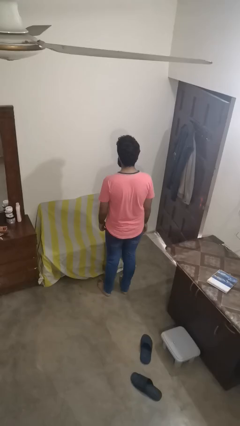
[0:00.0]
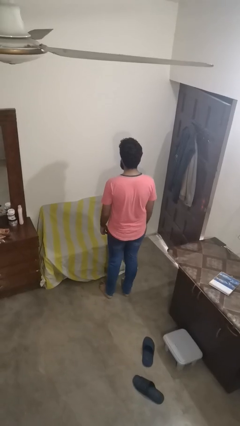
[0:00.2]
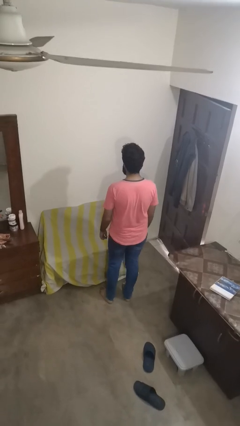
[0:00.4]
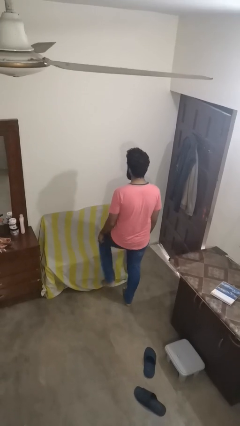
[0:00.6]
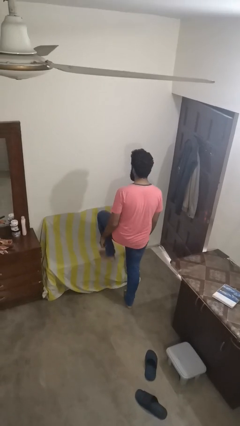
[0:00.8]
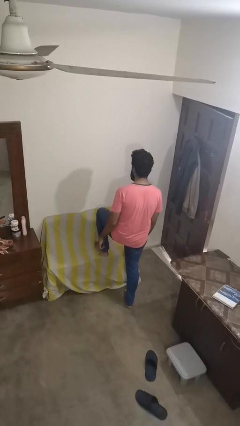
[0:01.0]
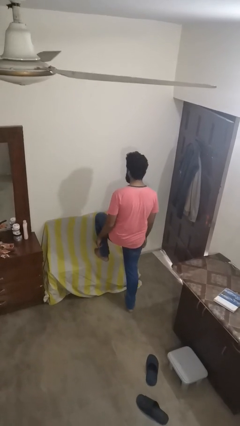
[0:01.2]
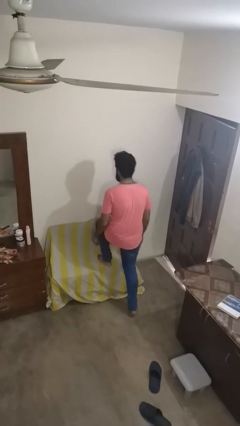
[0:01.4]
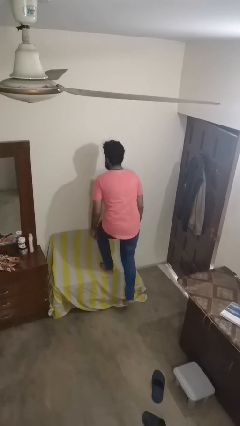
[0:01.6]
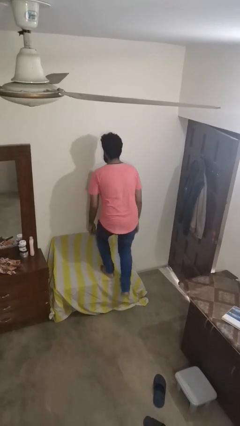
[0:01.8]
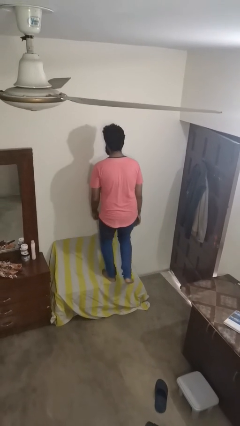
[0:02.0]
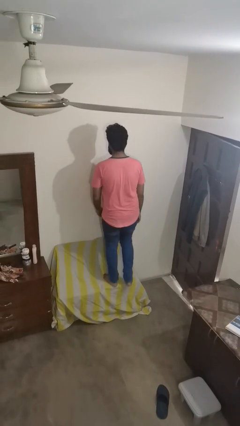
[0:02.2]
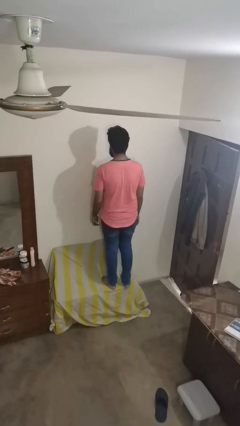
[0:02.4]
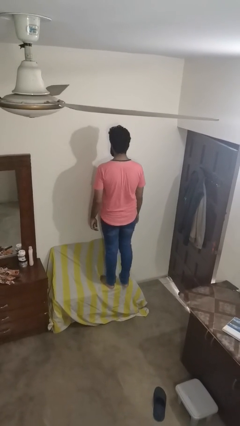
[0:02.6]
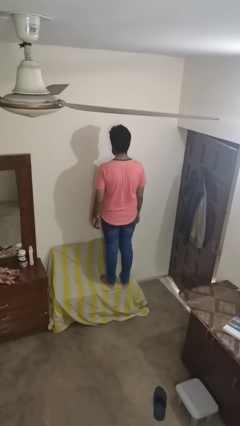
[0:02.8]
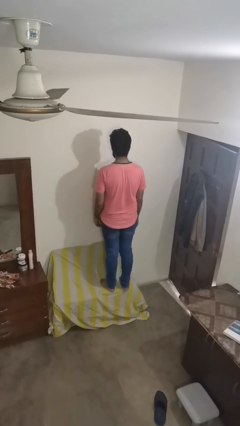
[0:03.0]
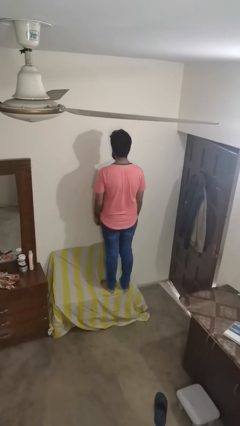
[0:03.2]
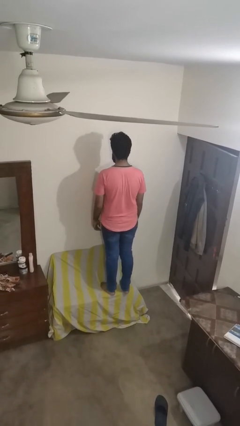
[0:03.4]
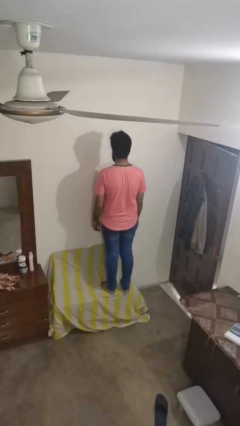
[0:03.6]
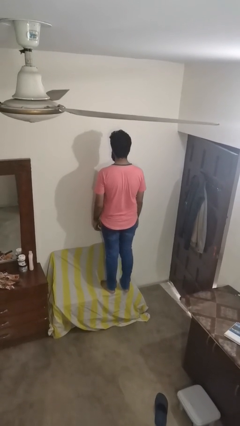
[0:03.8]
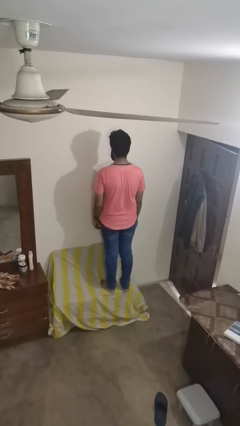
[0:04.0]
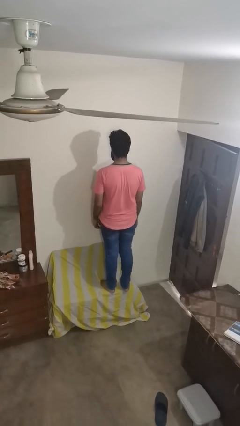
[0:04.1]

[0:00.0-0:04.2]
person climbs on couch

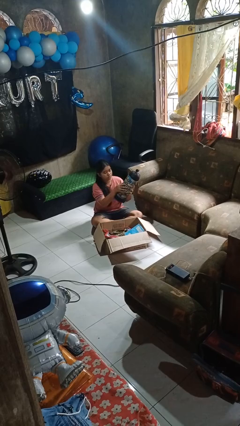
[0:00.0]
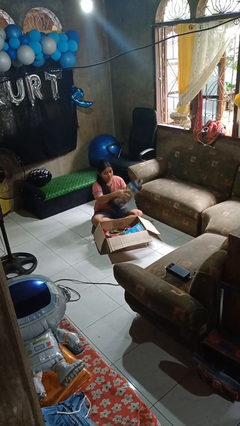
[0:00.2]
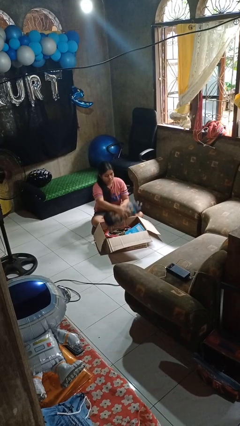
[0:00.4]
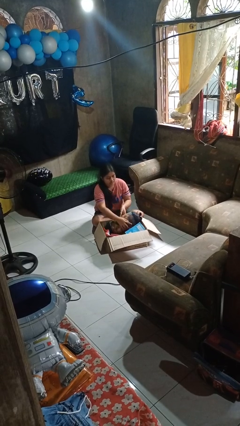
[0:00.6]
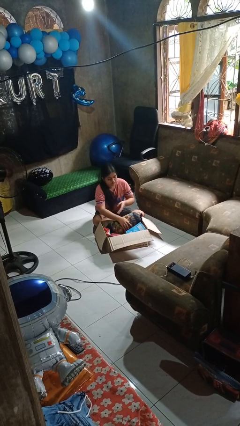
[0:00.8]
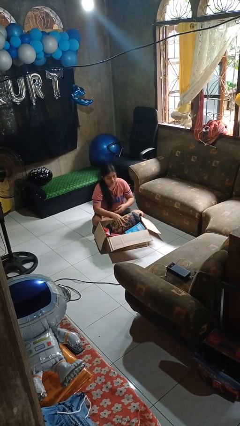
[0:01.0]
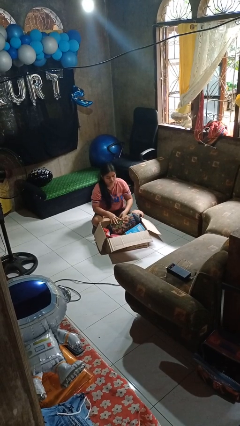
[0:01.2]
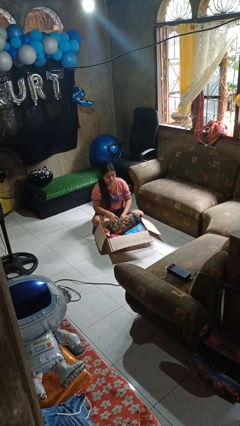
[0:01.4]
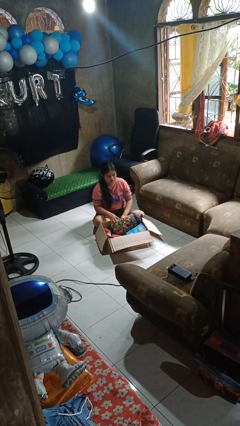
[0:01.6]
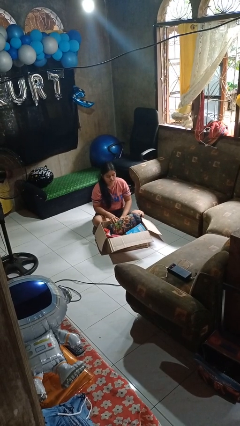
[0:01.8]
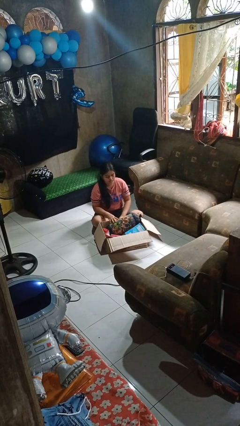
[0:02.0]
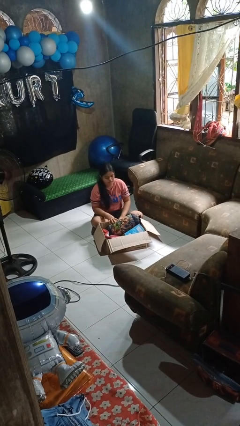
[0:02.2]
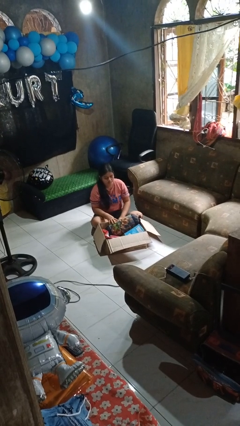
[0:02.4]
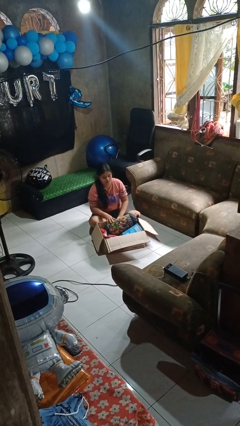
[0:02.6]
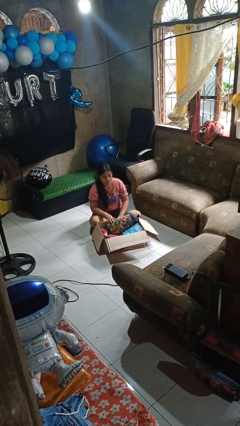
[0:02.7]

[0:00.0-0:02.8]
person puts object into box

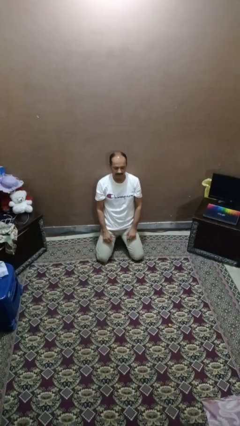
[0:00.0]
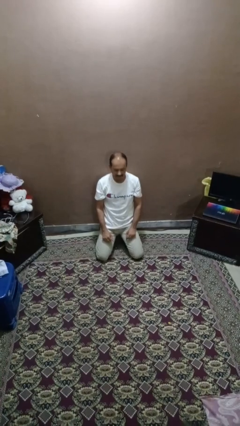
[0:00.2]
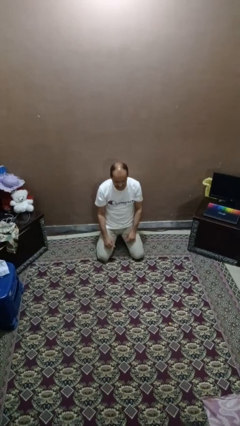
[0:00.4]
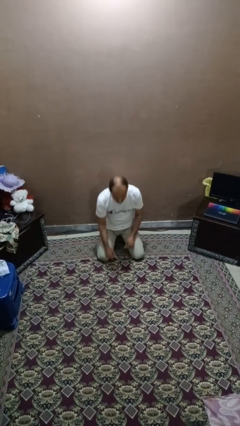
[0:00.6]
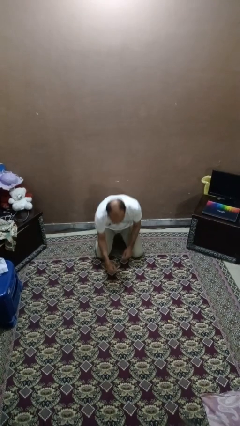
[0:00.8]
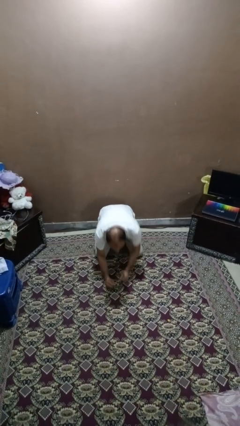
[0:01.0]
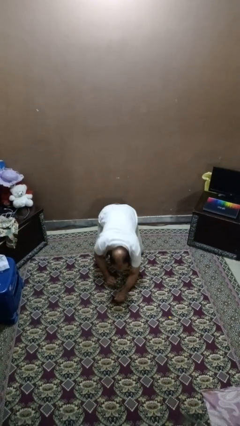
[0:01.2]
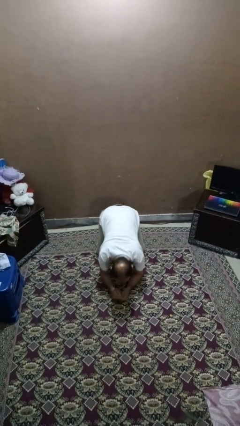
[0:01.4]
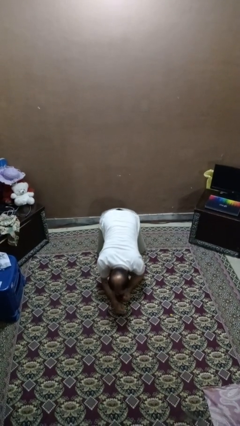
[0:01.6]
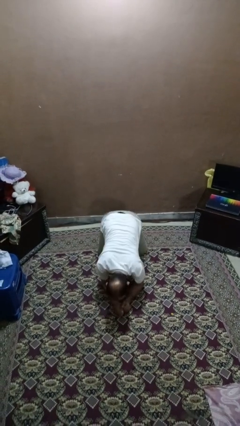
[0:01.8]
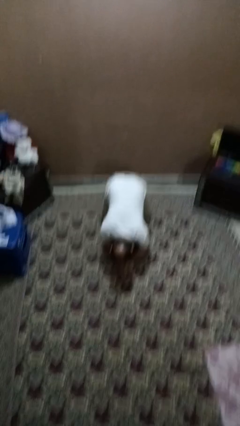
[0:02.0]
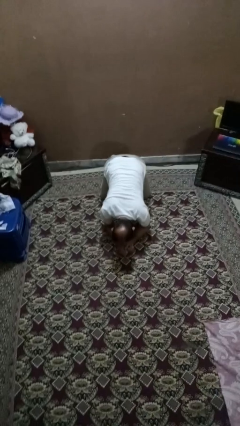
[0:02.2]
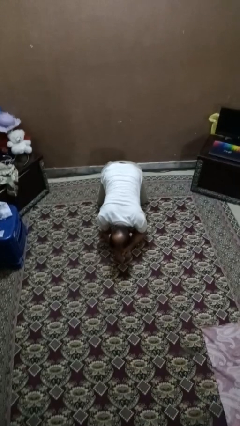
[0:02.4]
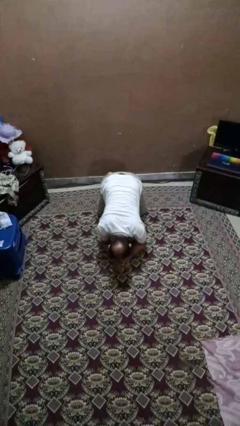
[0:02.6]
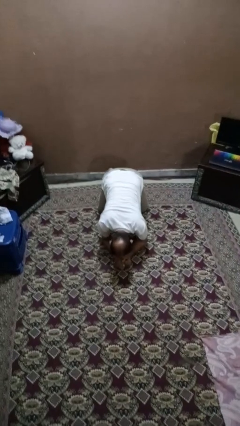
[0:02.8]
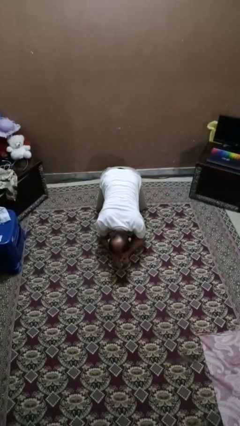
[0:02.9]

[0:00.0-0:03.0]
person crawls

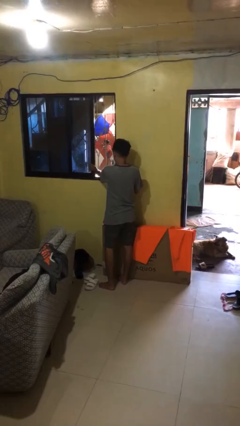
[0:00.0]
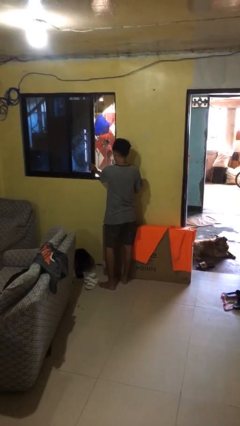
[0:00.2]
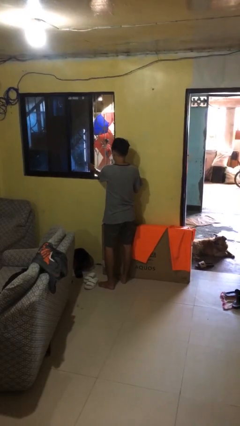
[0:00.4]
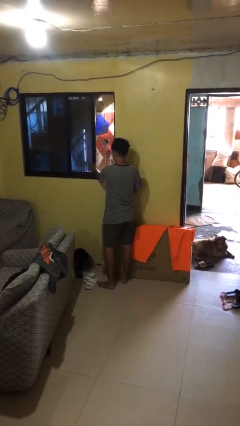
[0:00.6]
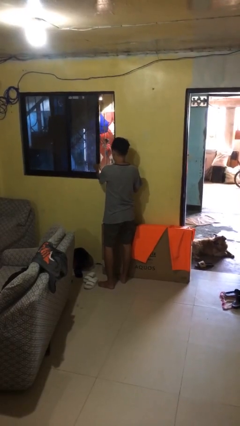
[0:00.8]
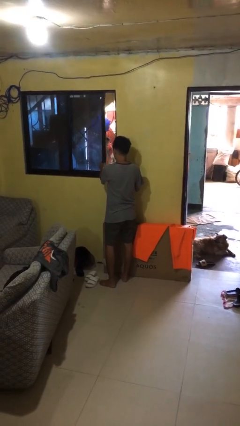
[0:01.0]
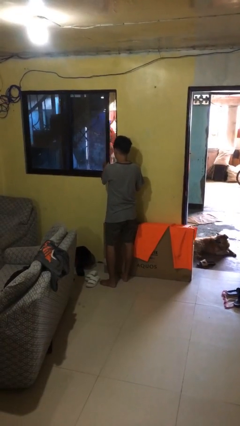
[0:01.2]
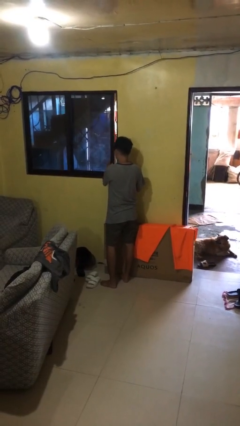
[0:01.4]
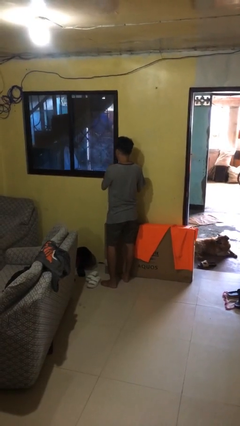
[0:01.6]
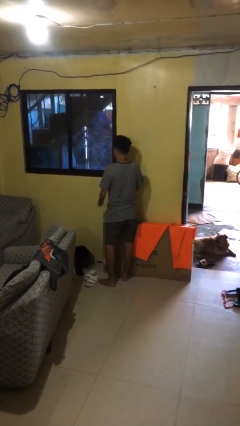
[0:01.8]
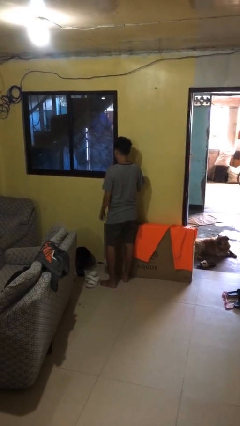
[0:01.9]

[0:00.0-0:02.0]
person closes home window

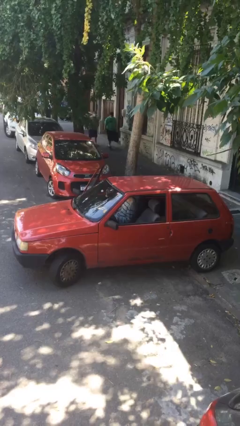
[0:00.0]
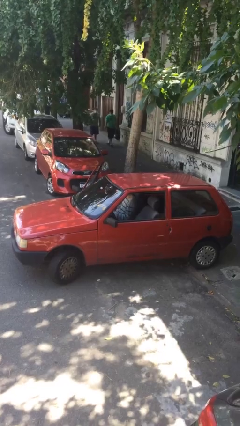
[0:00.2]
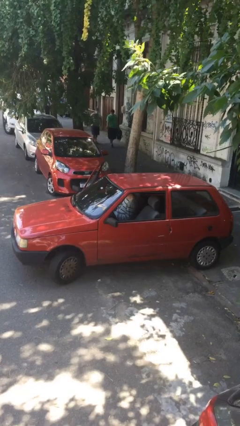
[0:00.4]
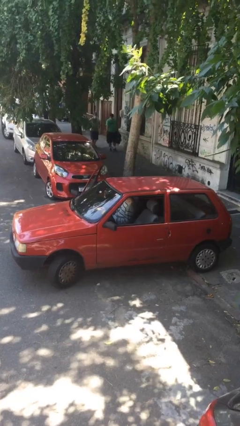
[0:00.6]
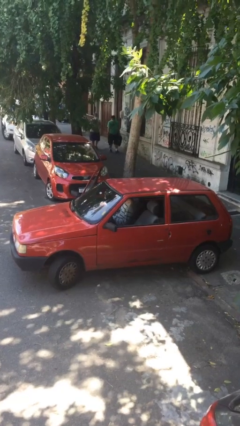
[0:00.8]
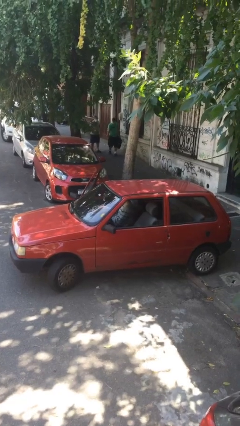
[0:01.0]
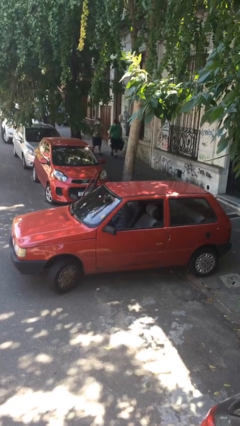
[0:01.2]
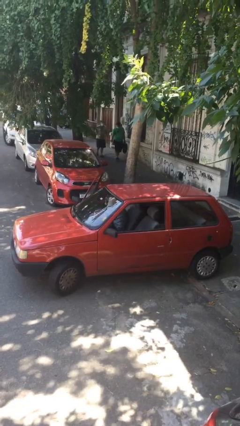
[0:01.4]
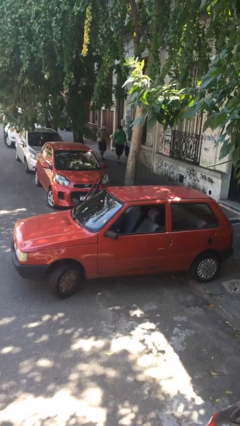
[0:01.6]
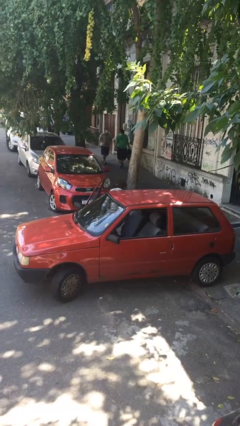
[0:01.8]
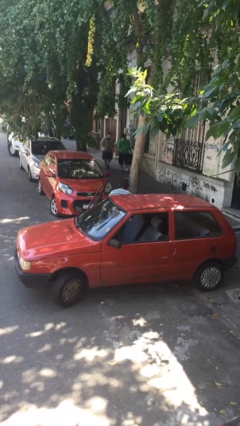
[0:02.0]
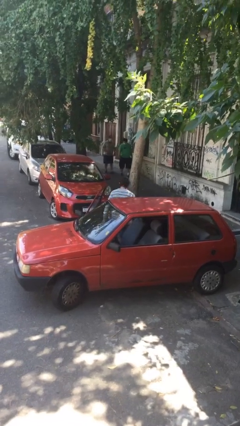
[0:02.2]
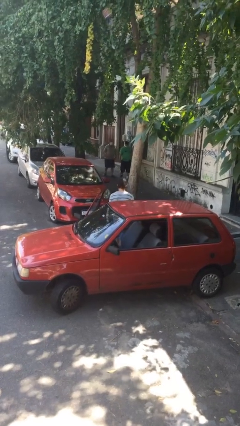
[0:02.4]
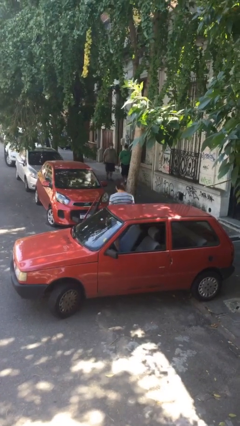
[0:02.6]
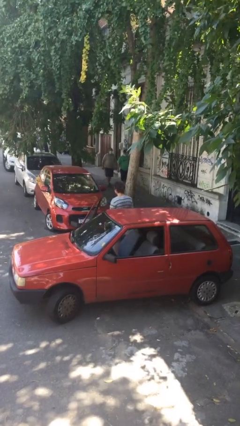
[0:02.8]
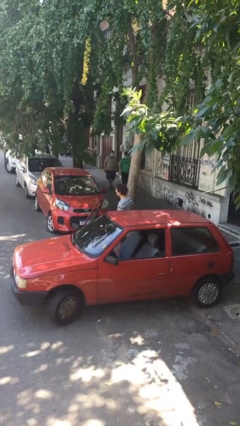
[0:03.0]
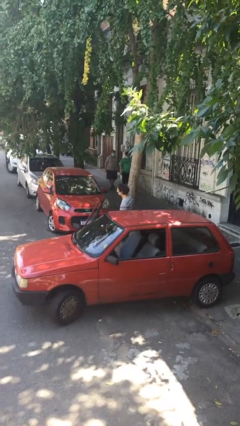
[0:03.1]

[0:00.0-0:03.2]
person exits car

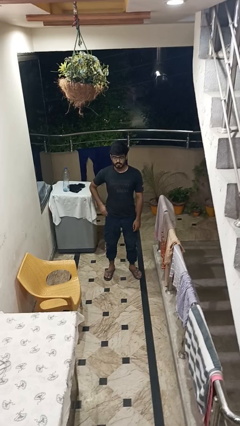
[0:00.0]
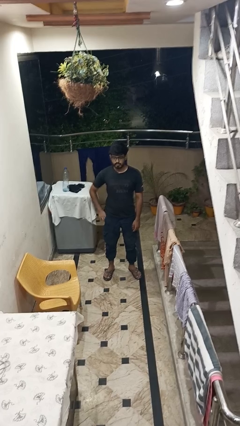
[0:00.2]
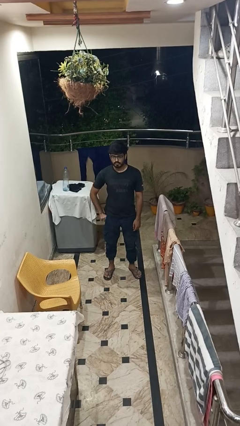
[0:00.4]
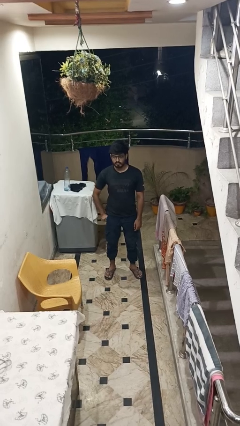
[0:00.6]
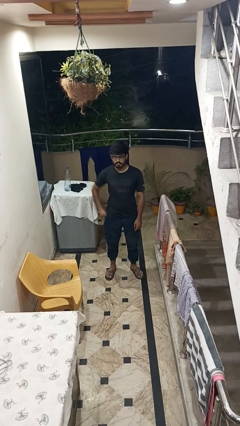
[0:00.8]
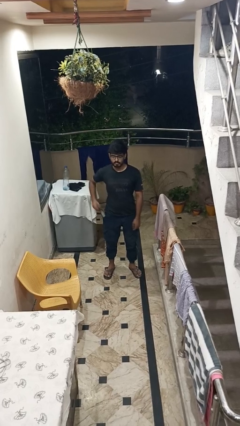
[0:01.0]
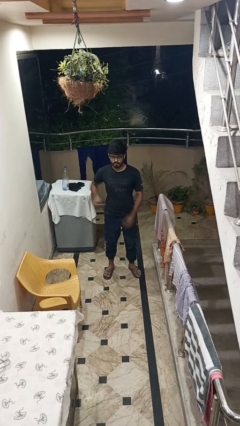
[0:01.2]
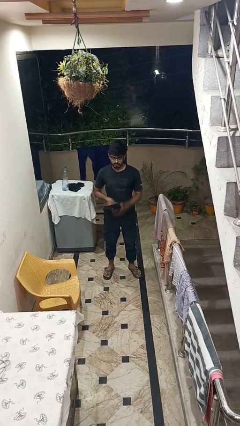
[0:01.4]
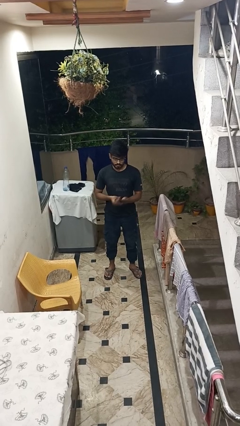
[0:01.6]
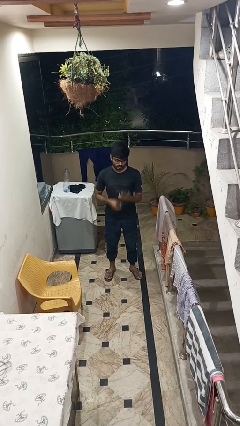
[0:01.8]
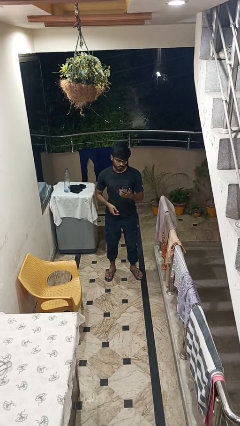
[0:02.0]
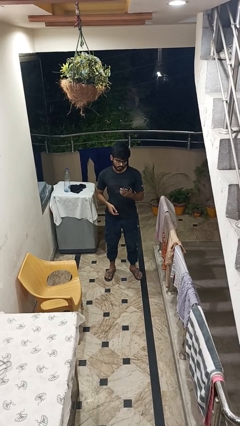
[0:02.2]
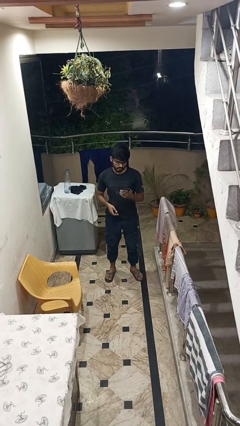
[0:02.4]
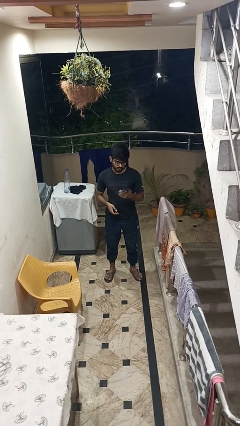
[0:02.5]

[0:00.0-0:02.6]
person takes phone from pocket
